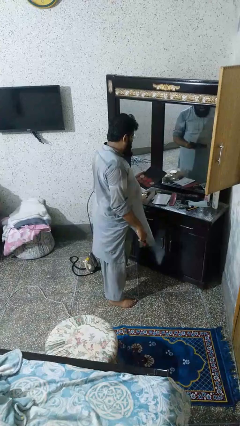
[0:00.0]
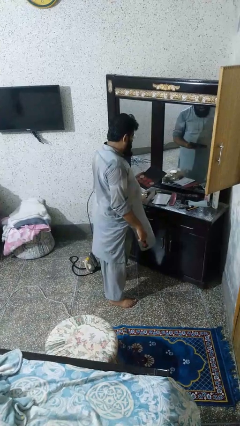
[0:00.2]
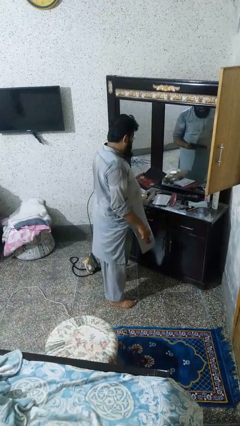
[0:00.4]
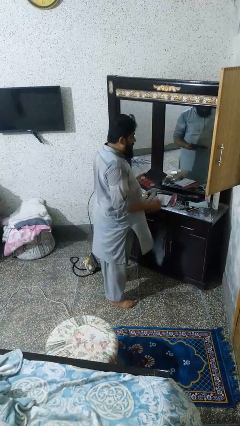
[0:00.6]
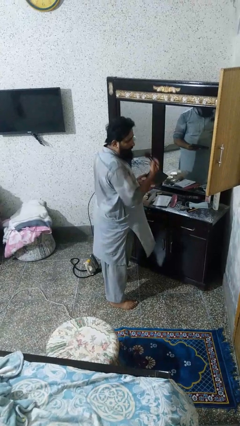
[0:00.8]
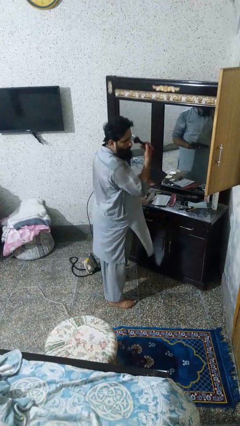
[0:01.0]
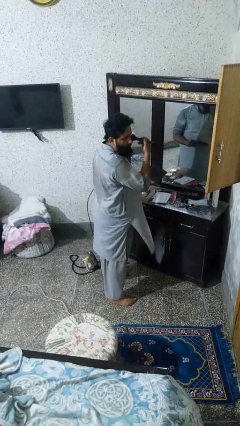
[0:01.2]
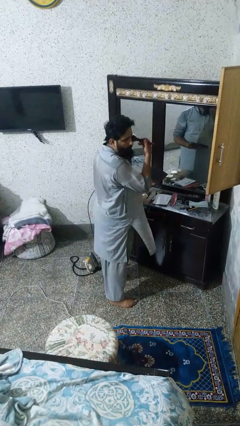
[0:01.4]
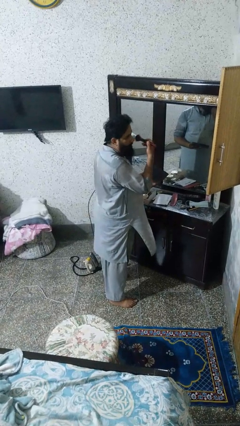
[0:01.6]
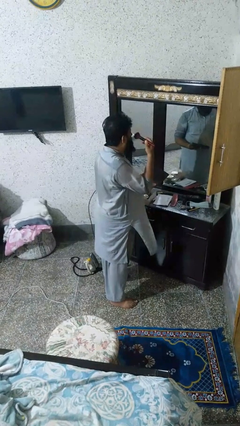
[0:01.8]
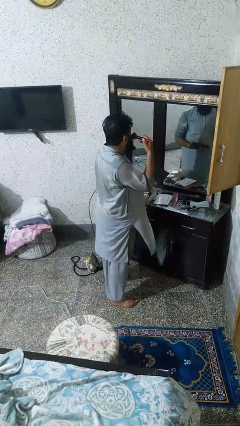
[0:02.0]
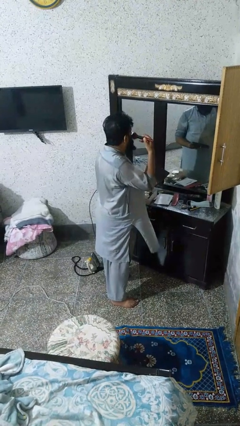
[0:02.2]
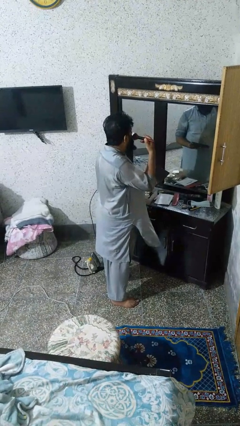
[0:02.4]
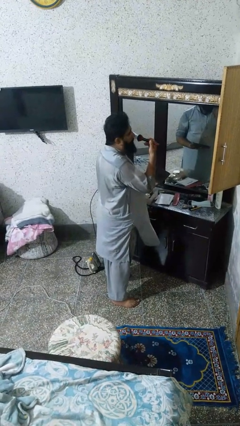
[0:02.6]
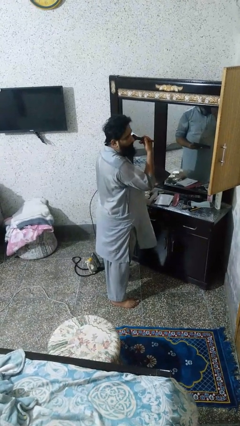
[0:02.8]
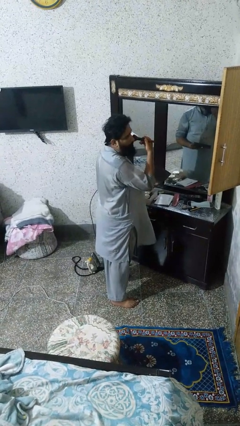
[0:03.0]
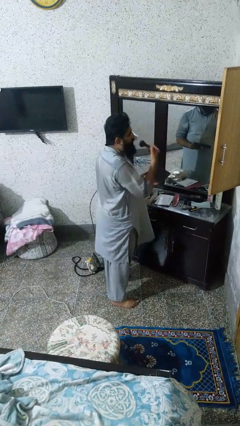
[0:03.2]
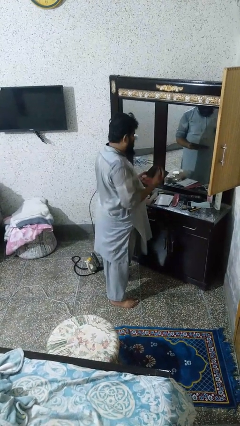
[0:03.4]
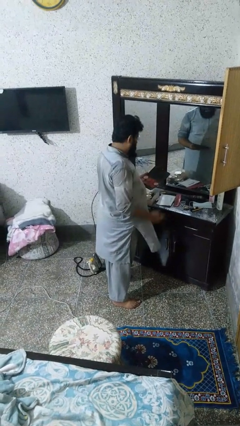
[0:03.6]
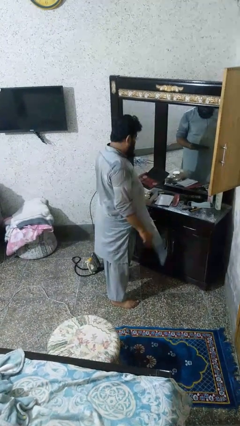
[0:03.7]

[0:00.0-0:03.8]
person applies foundation makeup

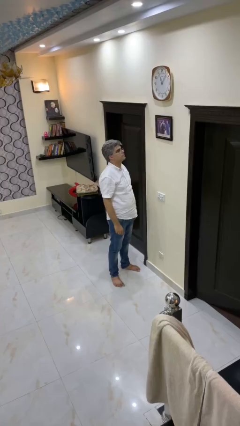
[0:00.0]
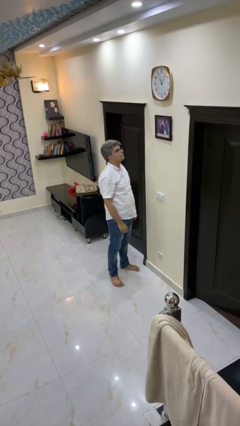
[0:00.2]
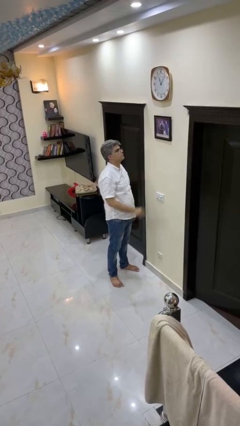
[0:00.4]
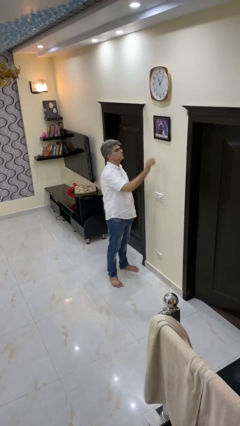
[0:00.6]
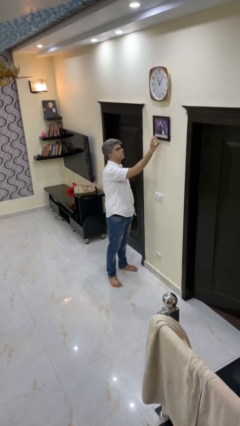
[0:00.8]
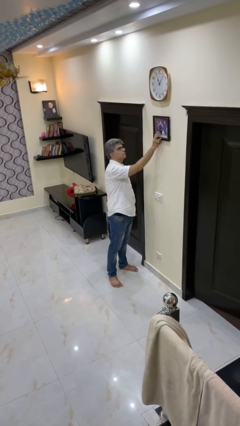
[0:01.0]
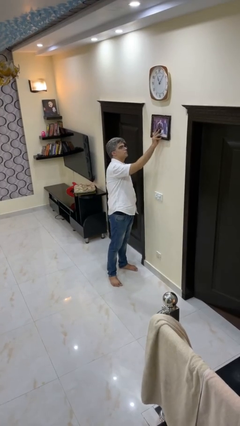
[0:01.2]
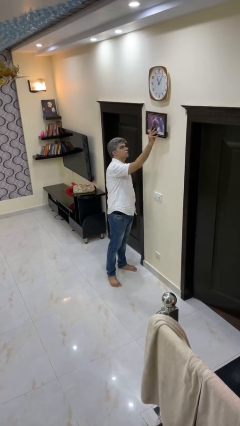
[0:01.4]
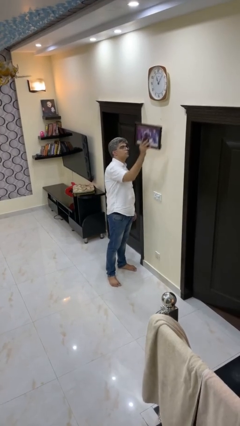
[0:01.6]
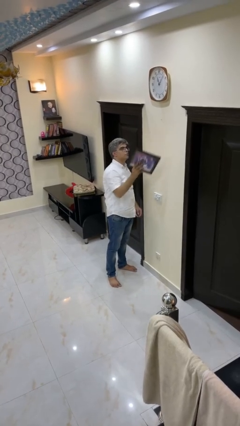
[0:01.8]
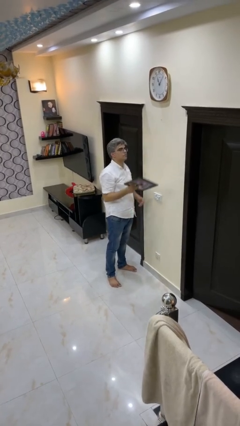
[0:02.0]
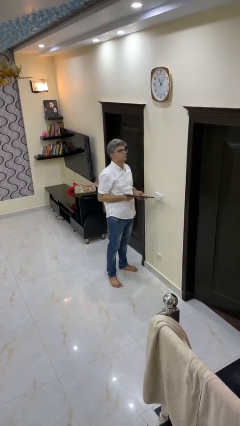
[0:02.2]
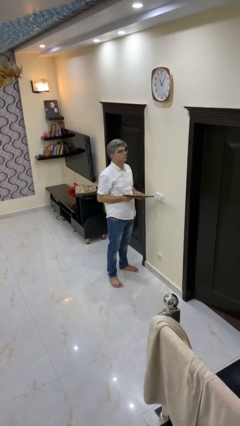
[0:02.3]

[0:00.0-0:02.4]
person takes down picture frame

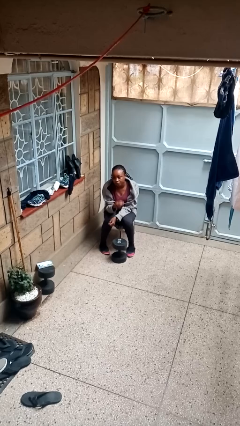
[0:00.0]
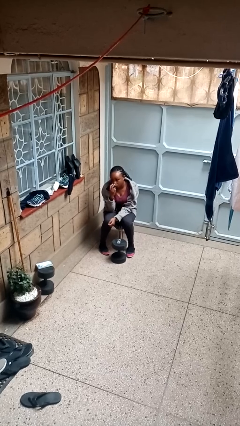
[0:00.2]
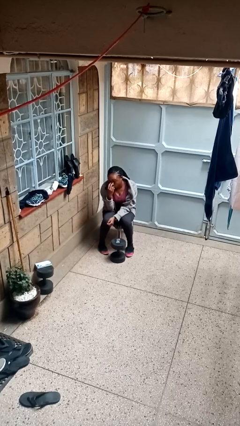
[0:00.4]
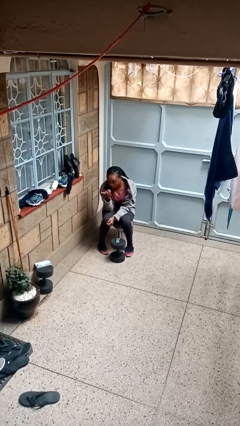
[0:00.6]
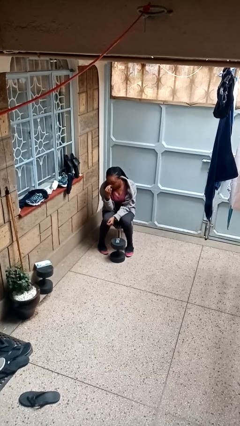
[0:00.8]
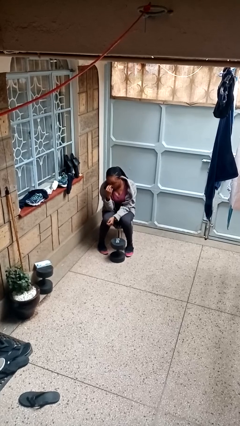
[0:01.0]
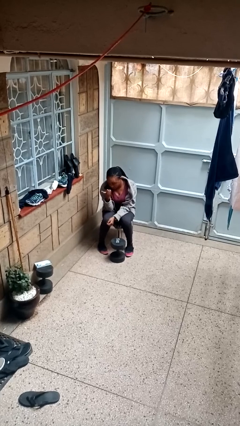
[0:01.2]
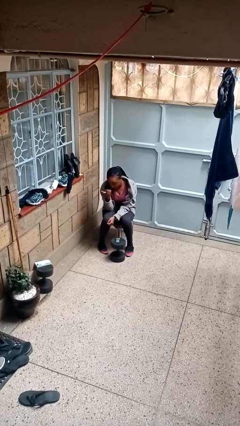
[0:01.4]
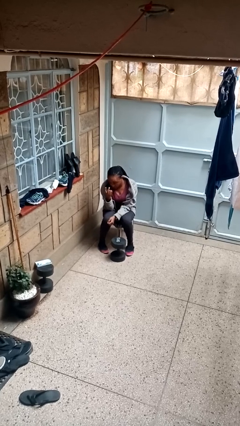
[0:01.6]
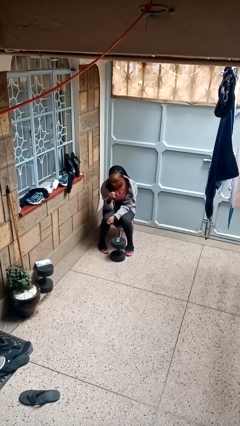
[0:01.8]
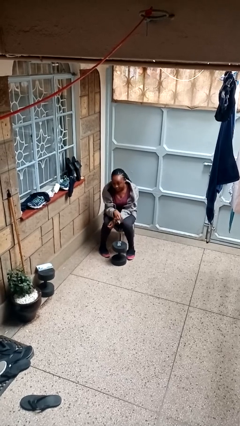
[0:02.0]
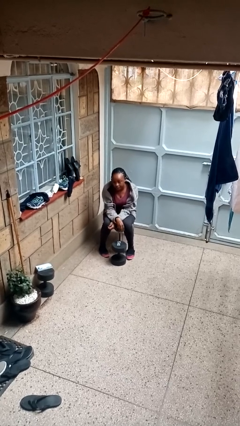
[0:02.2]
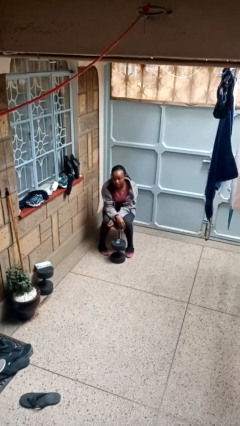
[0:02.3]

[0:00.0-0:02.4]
person gestures watch closely

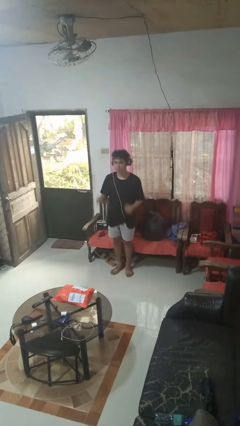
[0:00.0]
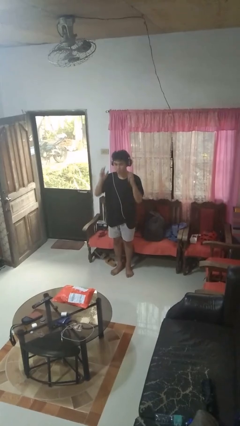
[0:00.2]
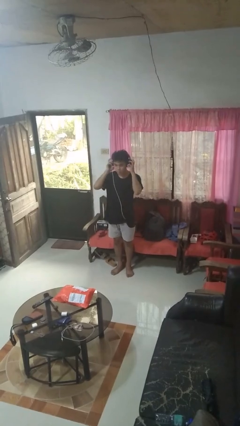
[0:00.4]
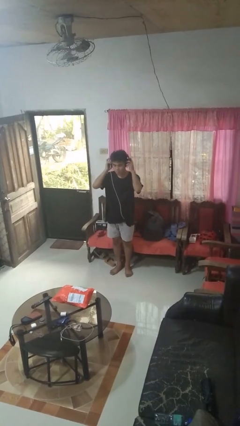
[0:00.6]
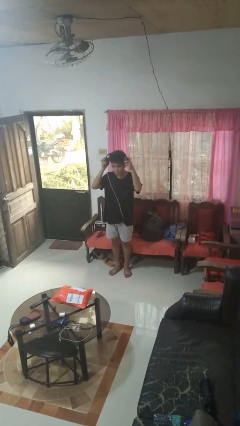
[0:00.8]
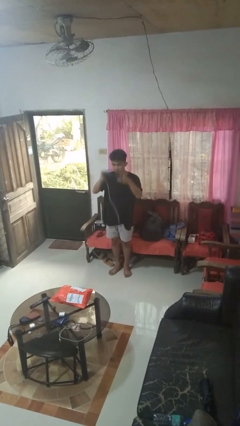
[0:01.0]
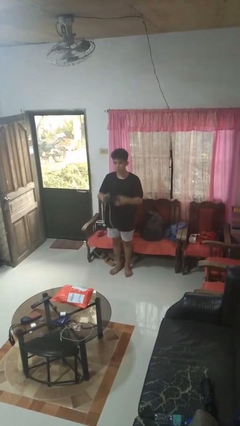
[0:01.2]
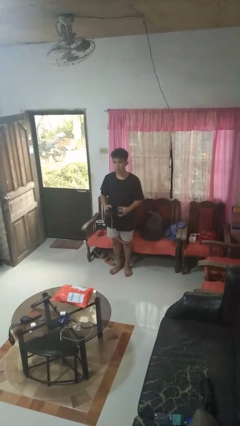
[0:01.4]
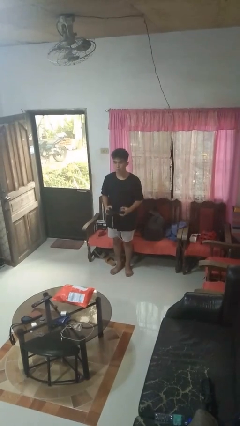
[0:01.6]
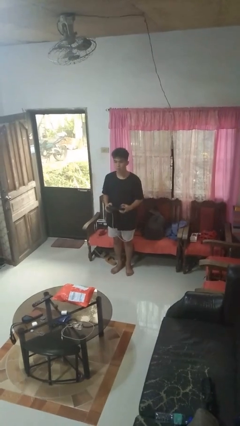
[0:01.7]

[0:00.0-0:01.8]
person takes off headphones

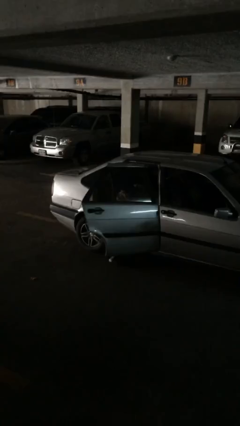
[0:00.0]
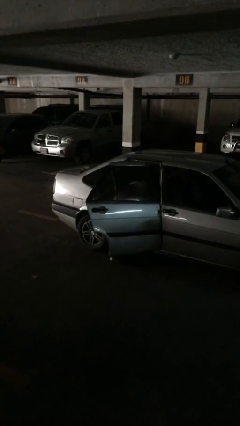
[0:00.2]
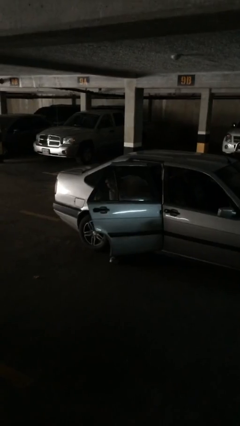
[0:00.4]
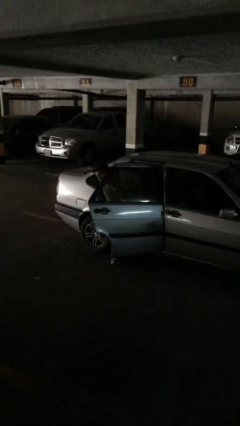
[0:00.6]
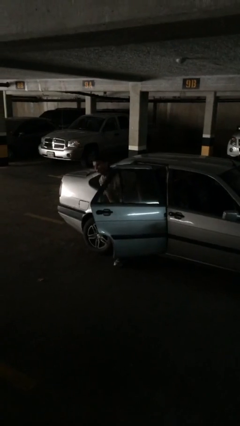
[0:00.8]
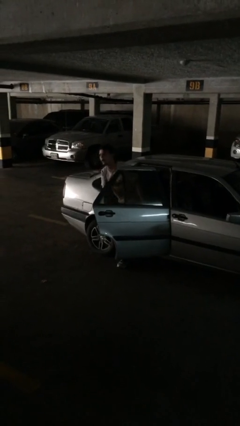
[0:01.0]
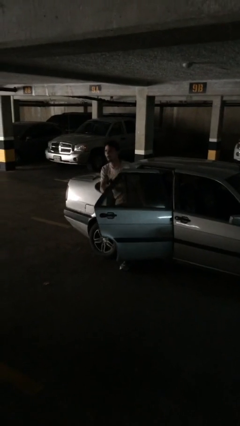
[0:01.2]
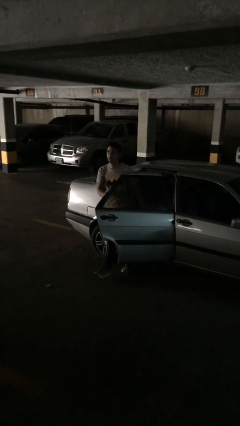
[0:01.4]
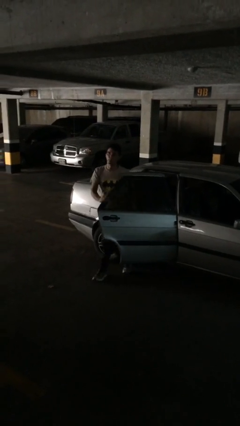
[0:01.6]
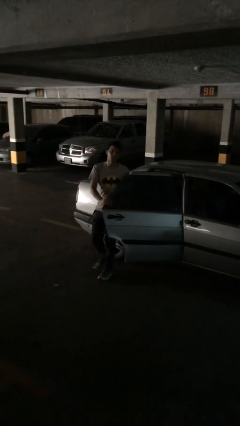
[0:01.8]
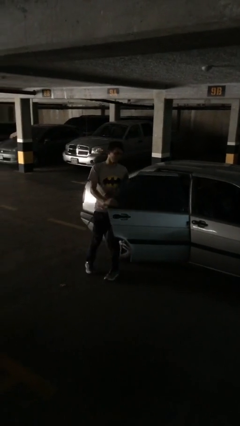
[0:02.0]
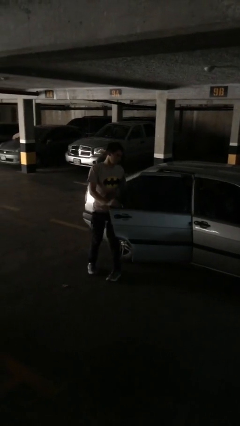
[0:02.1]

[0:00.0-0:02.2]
person exits car

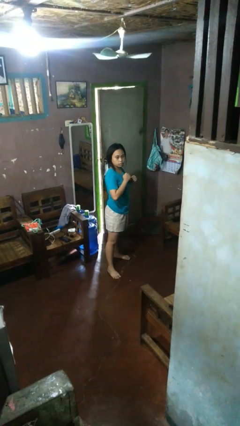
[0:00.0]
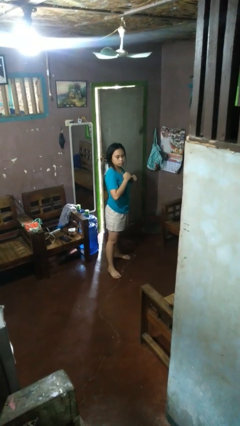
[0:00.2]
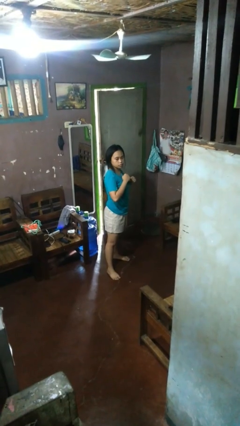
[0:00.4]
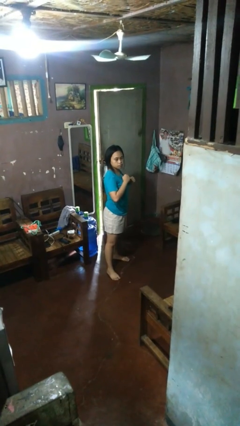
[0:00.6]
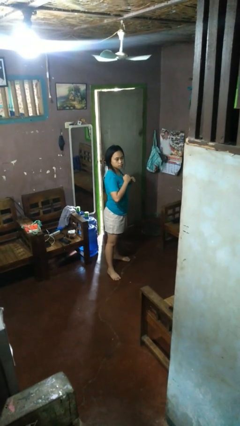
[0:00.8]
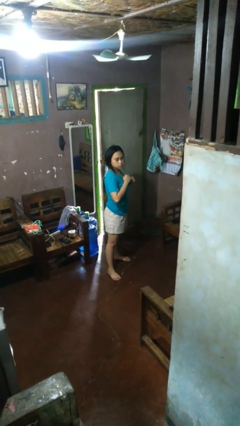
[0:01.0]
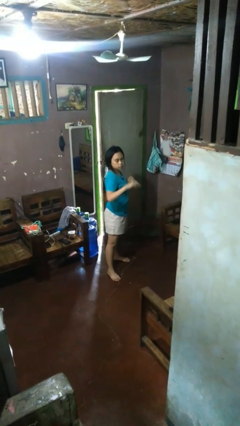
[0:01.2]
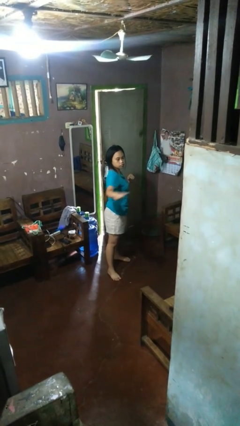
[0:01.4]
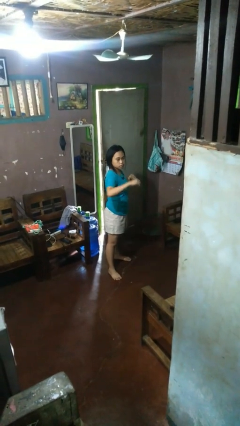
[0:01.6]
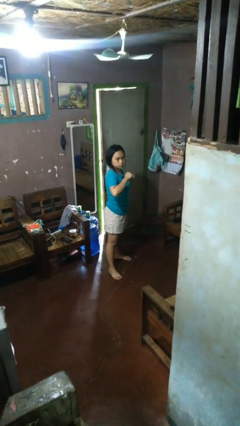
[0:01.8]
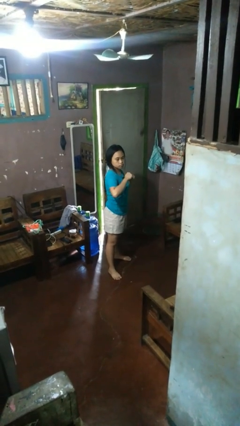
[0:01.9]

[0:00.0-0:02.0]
person karate chop

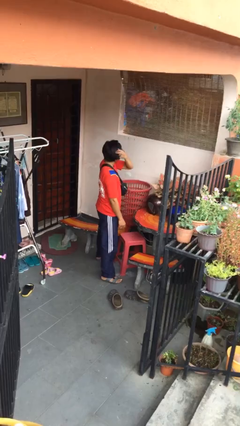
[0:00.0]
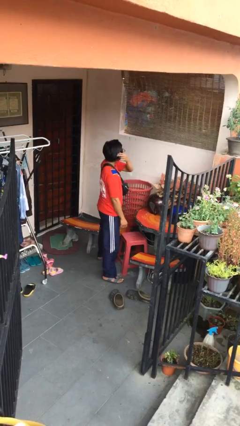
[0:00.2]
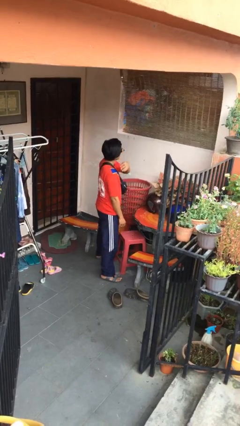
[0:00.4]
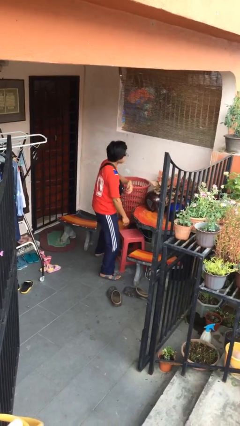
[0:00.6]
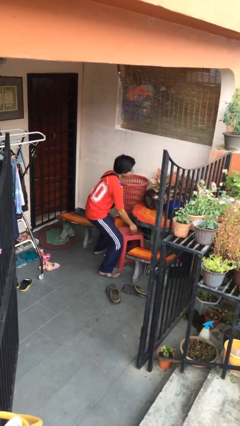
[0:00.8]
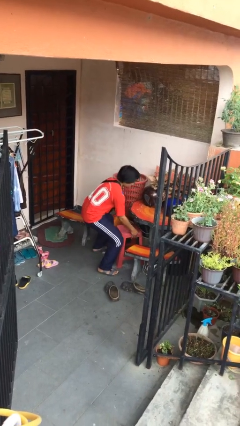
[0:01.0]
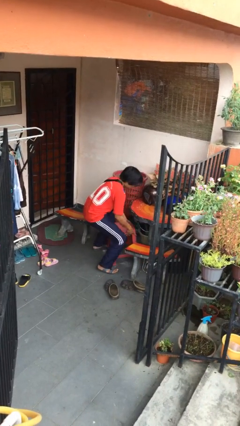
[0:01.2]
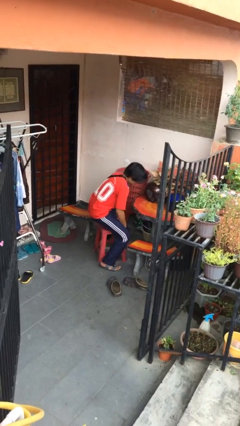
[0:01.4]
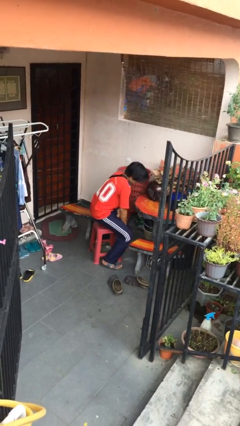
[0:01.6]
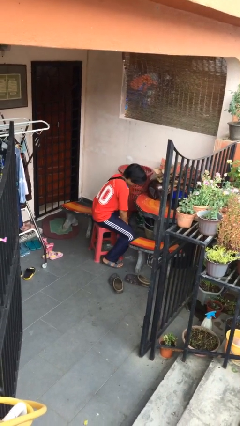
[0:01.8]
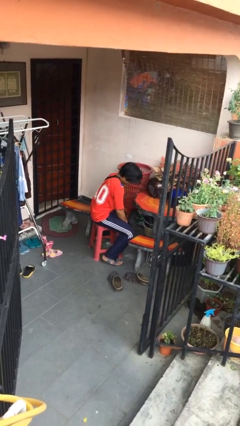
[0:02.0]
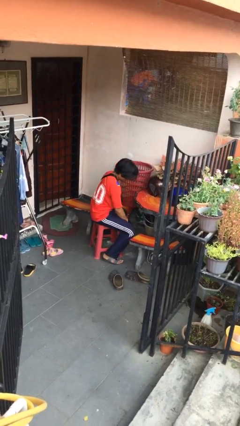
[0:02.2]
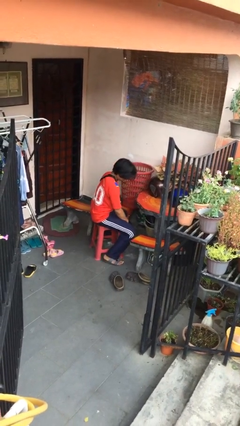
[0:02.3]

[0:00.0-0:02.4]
person sits down
